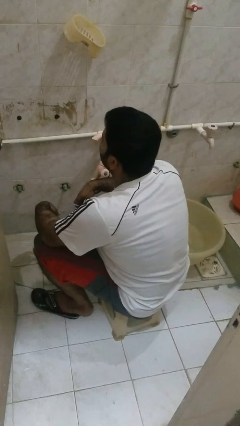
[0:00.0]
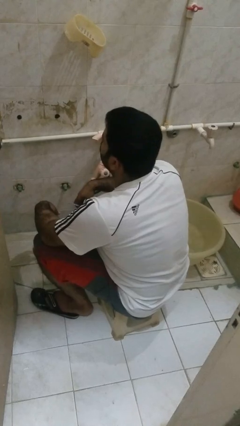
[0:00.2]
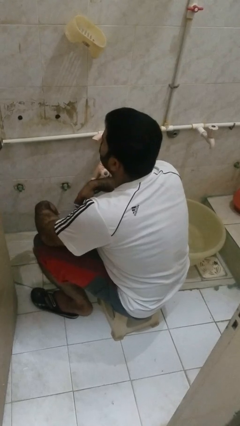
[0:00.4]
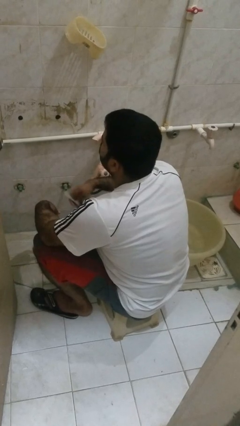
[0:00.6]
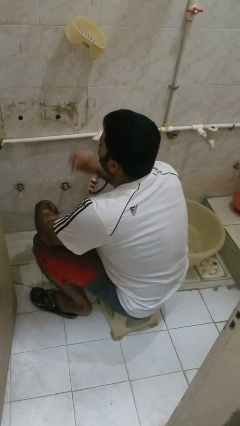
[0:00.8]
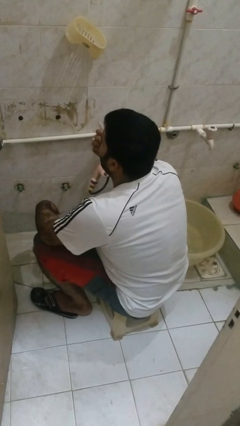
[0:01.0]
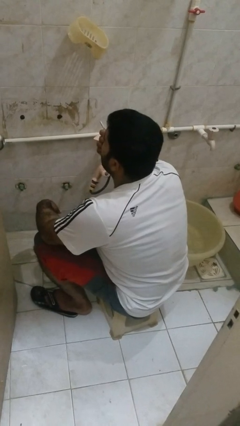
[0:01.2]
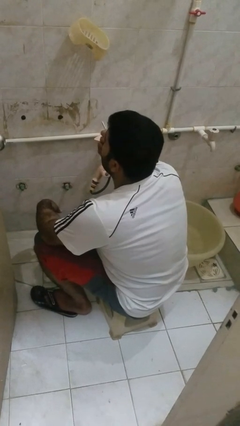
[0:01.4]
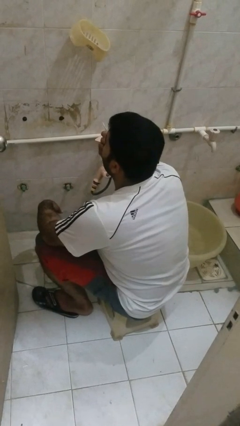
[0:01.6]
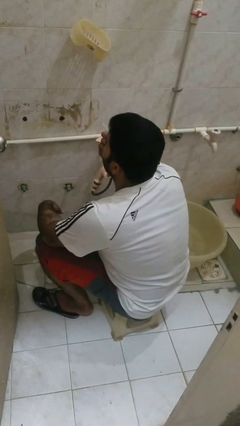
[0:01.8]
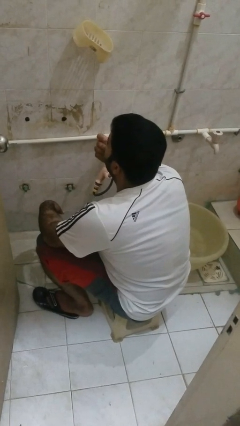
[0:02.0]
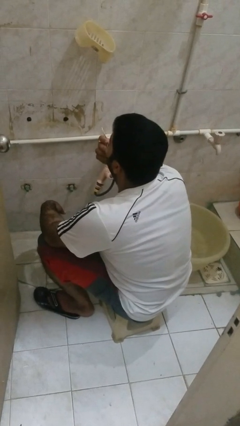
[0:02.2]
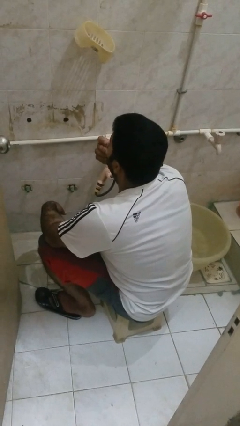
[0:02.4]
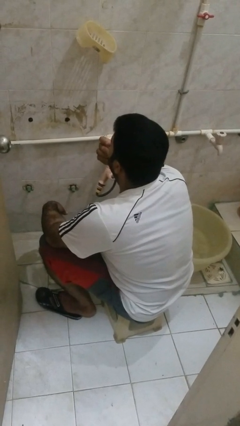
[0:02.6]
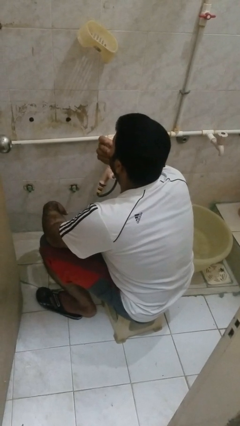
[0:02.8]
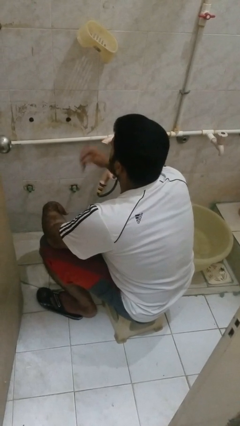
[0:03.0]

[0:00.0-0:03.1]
person flosses

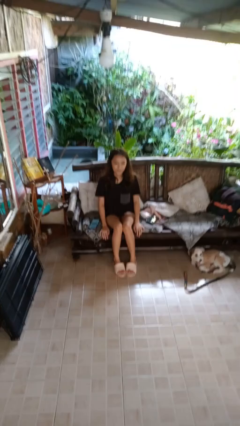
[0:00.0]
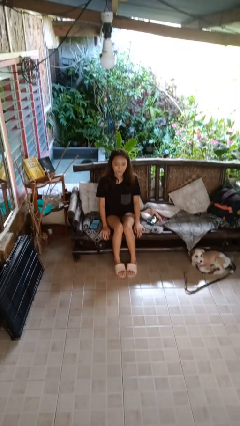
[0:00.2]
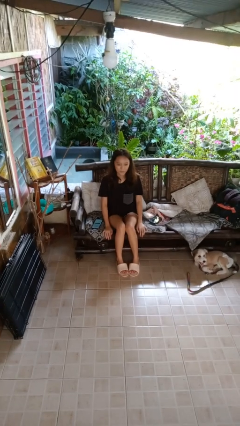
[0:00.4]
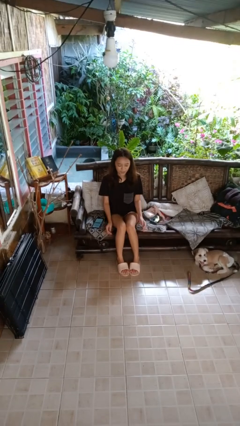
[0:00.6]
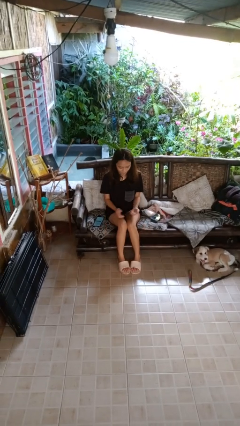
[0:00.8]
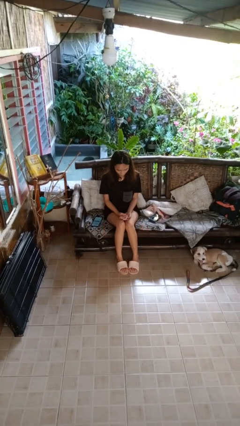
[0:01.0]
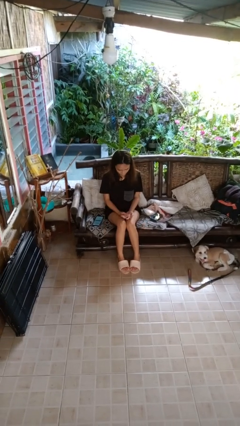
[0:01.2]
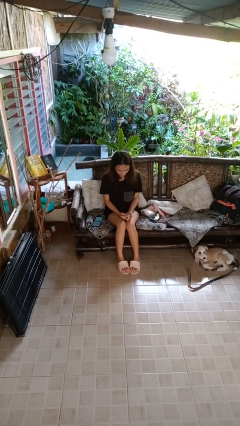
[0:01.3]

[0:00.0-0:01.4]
person looks at hands in lap

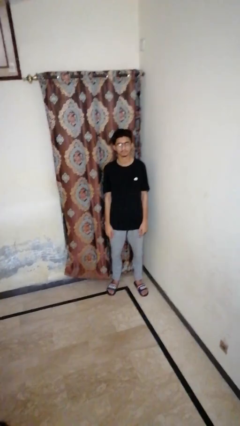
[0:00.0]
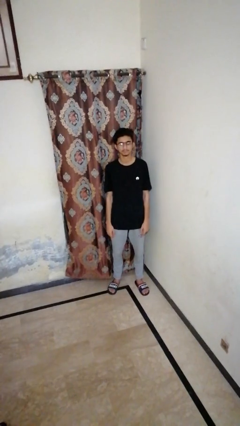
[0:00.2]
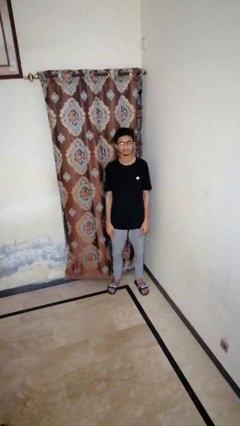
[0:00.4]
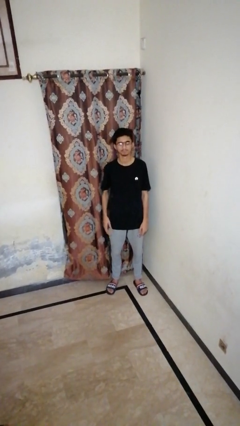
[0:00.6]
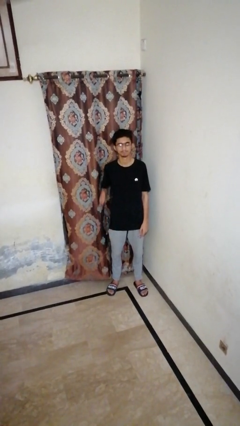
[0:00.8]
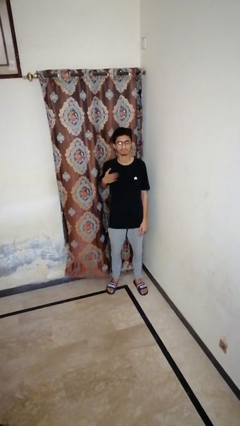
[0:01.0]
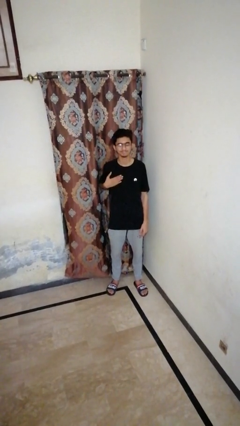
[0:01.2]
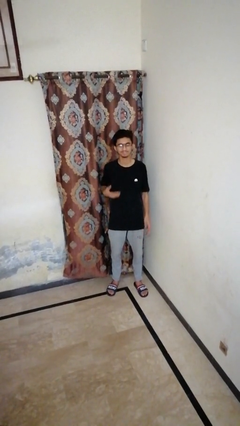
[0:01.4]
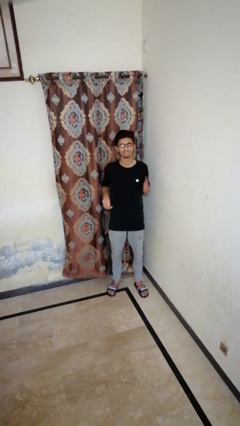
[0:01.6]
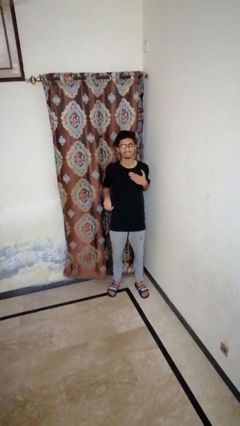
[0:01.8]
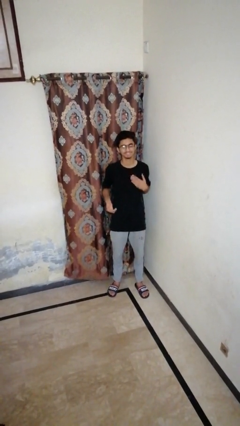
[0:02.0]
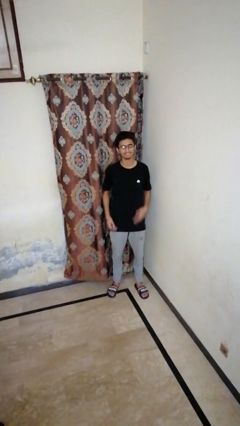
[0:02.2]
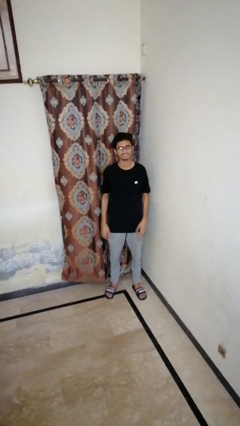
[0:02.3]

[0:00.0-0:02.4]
person drums on chest

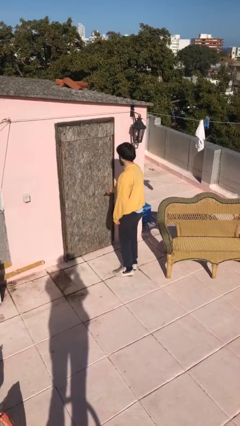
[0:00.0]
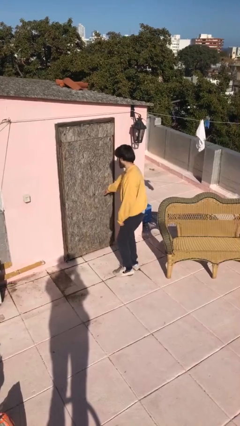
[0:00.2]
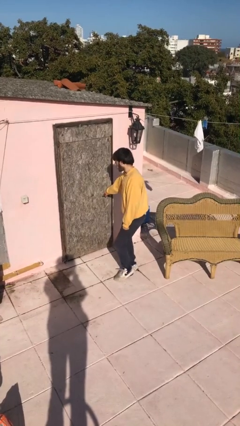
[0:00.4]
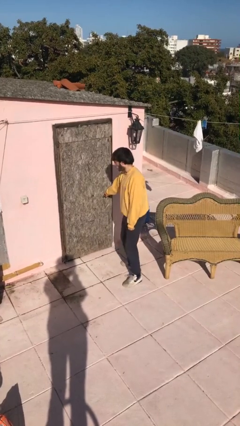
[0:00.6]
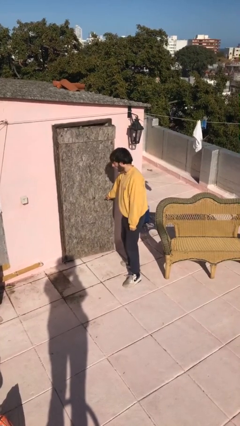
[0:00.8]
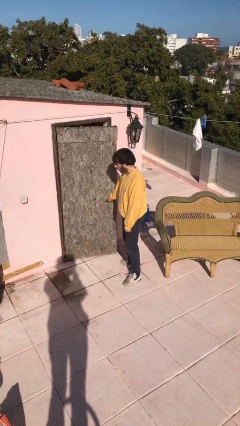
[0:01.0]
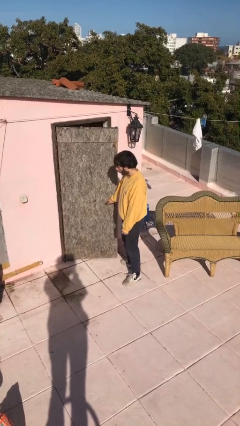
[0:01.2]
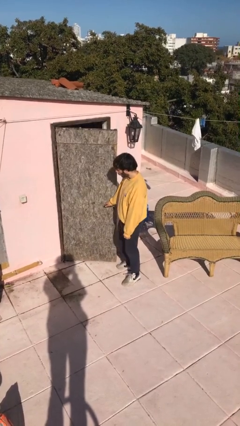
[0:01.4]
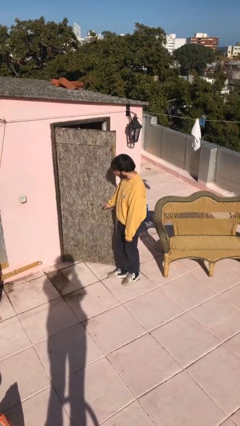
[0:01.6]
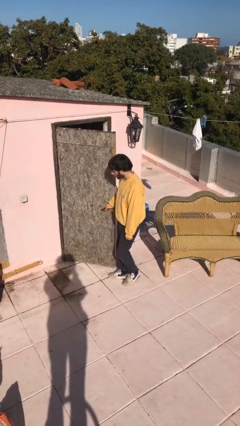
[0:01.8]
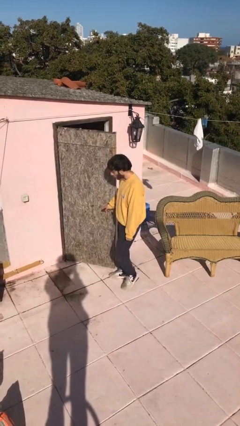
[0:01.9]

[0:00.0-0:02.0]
person opens facility door

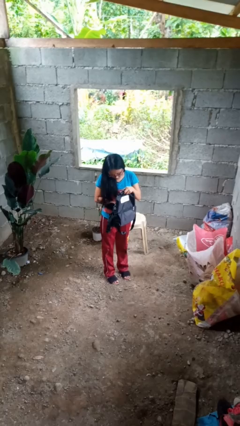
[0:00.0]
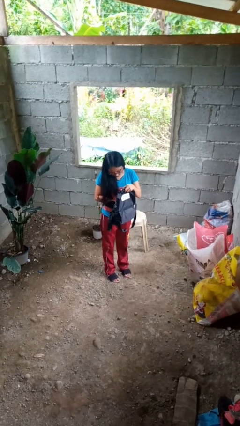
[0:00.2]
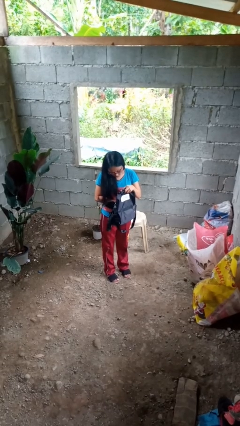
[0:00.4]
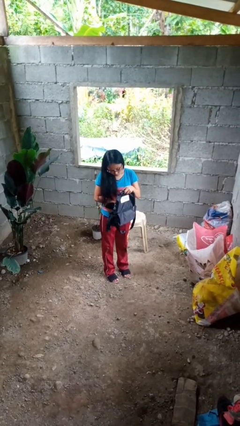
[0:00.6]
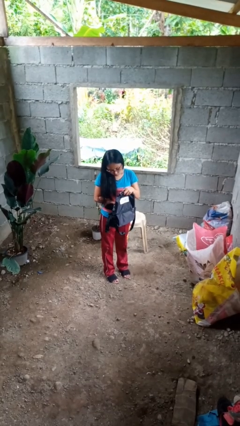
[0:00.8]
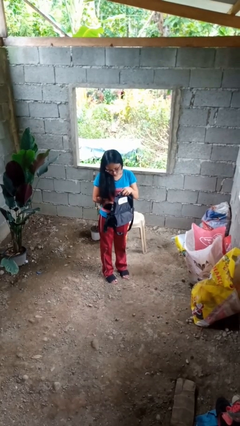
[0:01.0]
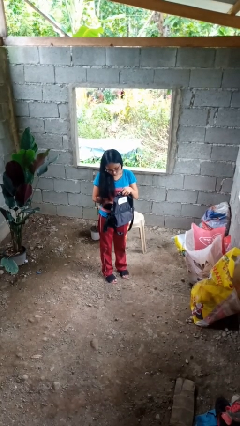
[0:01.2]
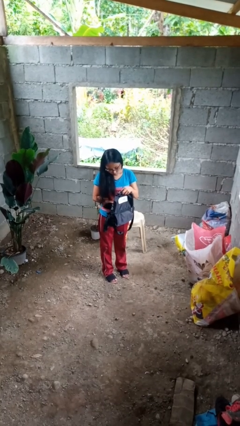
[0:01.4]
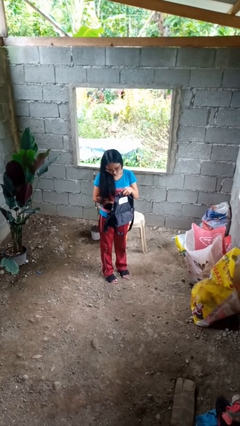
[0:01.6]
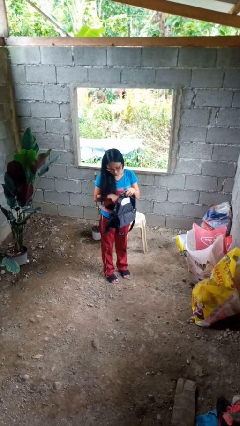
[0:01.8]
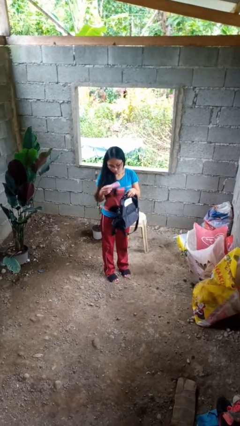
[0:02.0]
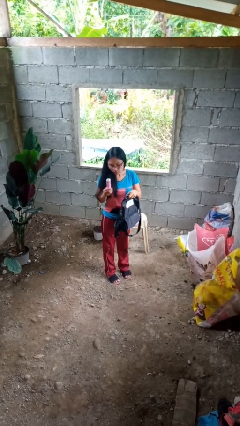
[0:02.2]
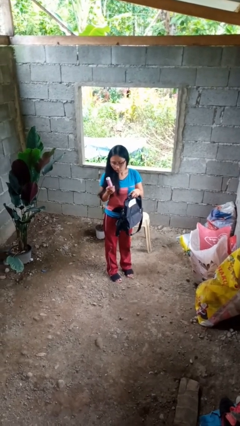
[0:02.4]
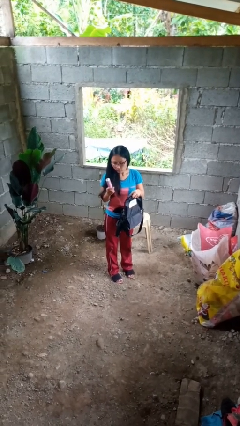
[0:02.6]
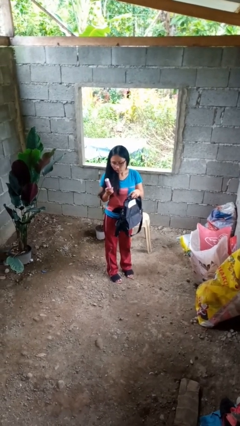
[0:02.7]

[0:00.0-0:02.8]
person takes object from backpack

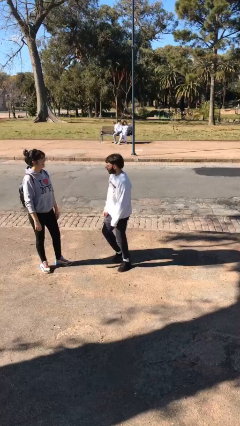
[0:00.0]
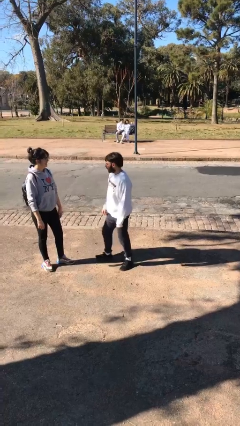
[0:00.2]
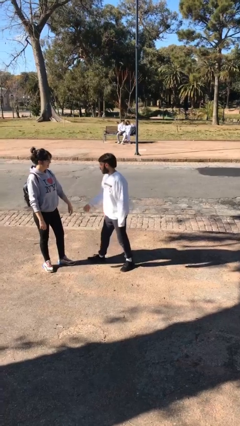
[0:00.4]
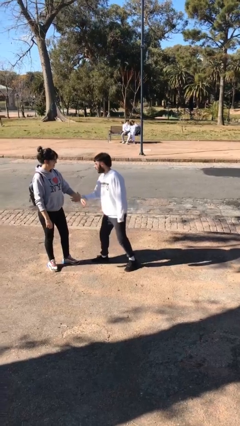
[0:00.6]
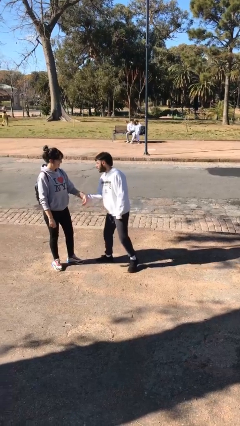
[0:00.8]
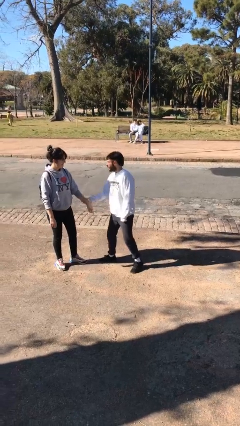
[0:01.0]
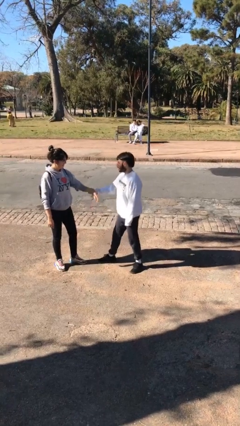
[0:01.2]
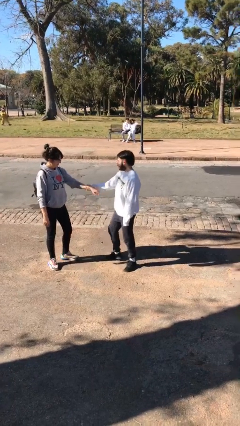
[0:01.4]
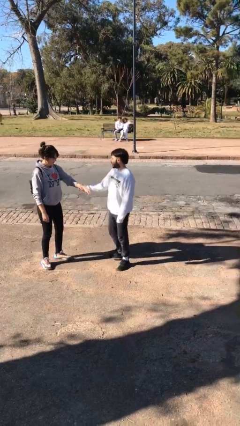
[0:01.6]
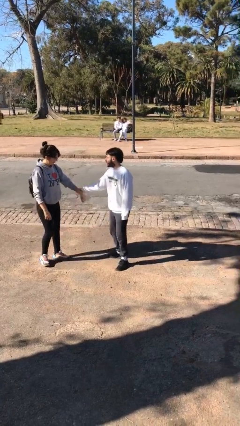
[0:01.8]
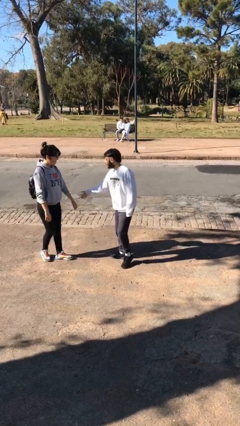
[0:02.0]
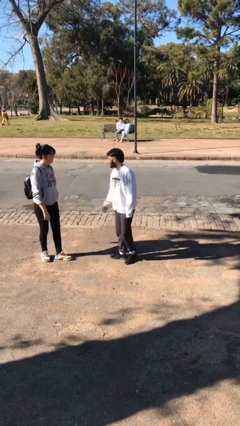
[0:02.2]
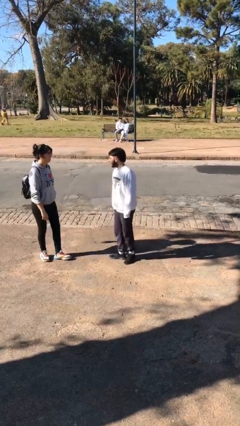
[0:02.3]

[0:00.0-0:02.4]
person grabs person by forearm

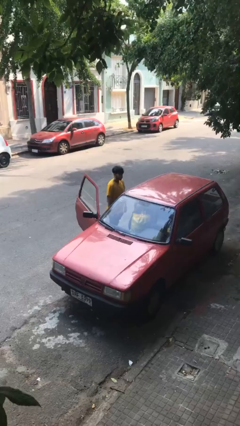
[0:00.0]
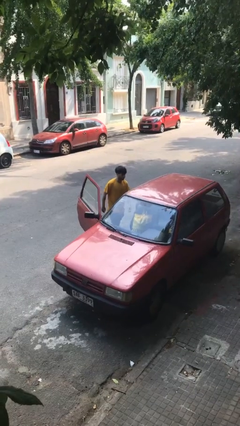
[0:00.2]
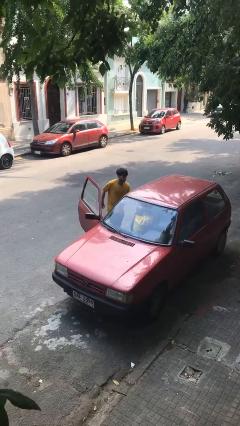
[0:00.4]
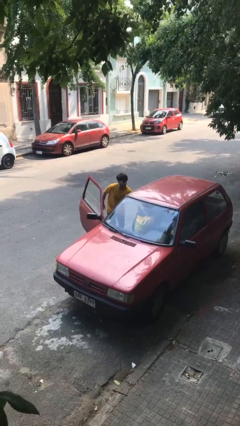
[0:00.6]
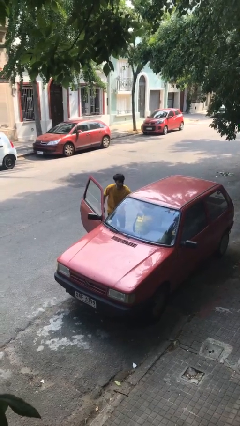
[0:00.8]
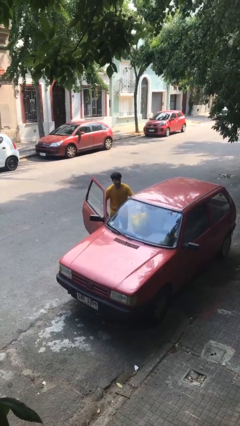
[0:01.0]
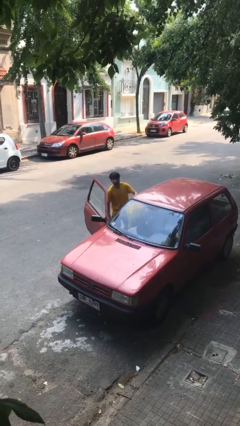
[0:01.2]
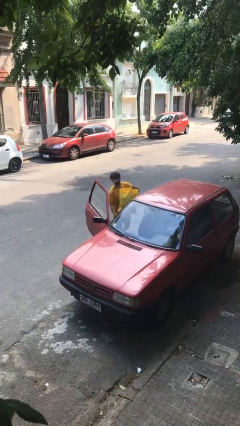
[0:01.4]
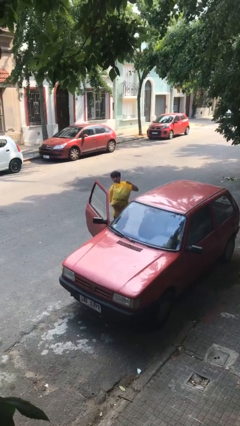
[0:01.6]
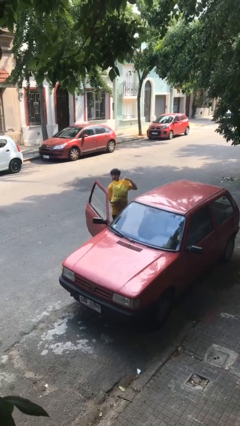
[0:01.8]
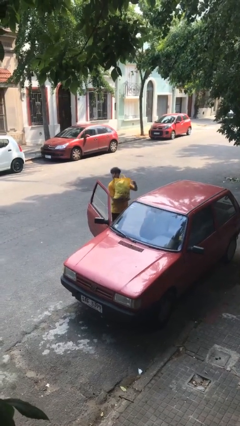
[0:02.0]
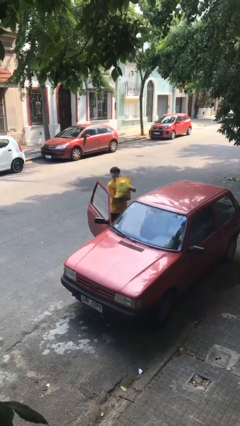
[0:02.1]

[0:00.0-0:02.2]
person unloads car

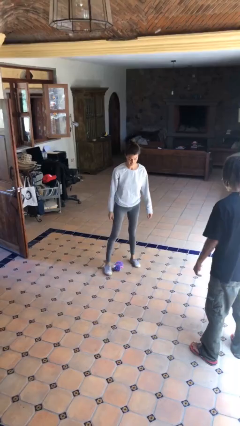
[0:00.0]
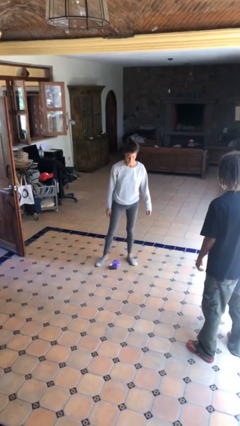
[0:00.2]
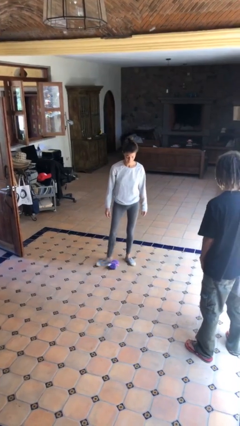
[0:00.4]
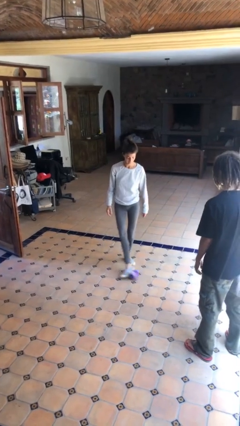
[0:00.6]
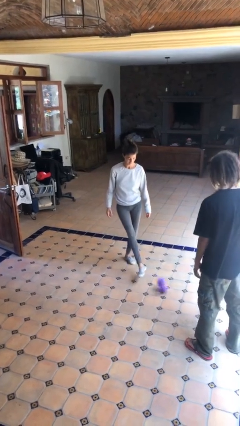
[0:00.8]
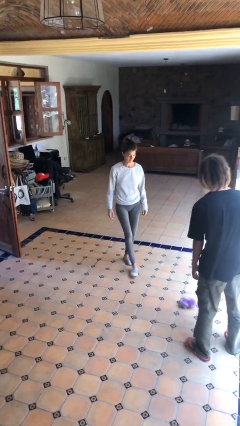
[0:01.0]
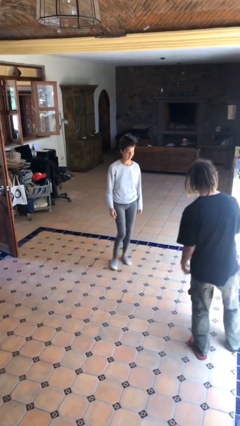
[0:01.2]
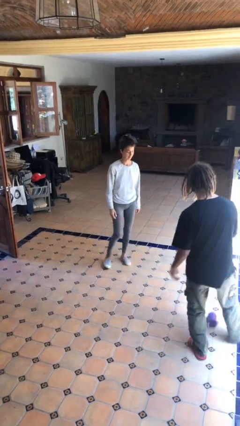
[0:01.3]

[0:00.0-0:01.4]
person kicks object to person
